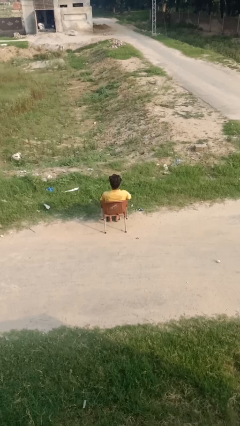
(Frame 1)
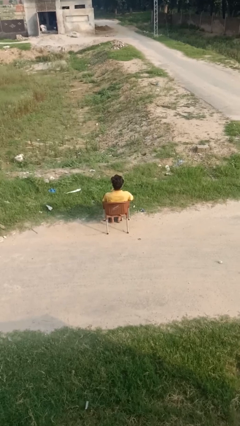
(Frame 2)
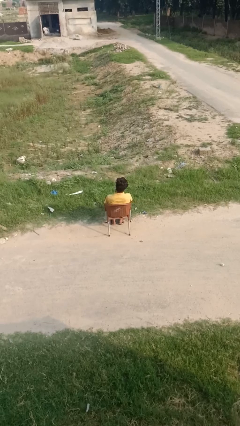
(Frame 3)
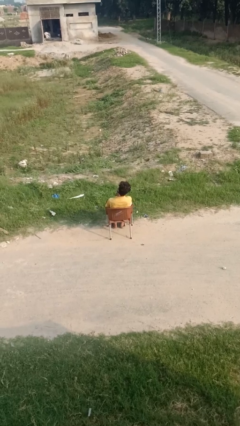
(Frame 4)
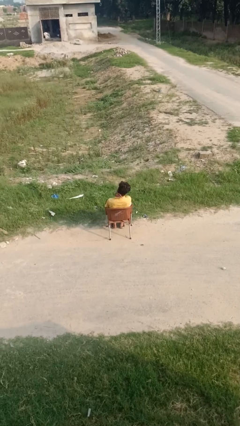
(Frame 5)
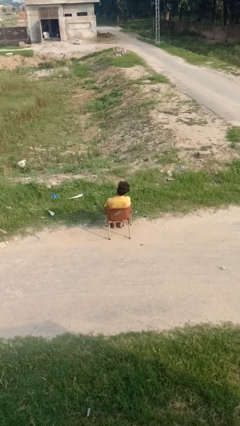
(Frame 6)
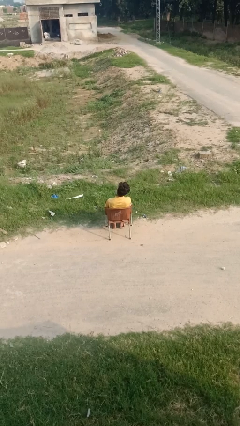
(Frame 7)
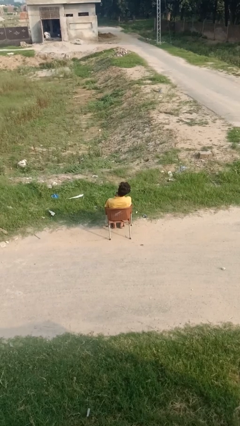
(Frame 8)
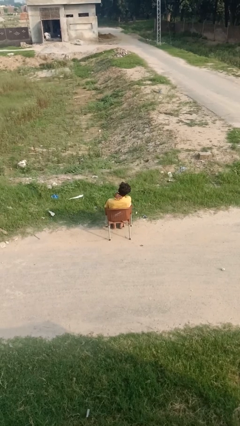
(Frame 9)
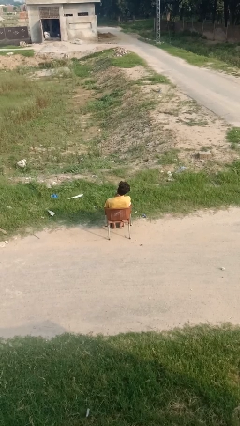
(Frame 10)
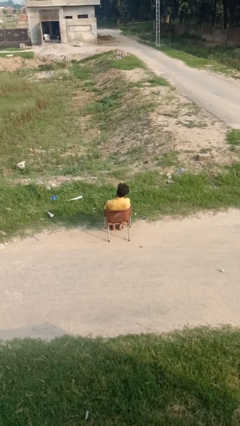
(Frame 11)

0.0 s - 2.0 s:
person rubs neck

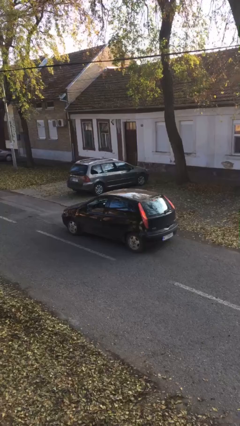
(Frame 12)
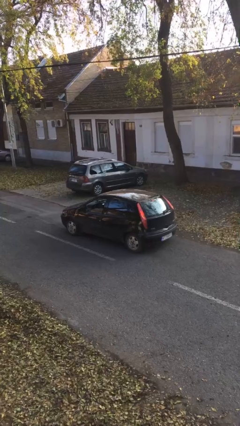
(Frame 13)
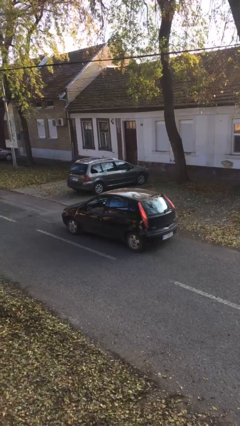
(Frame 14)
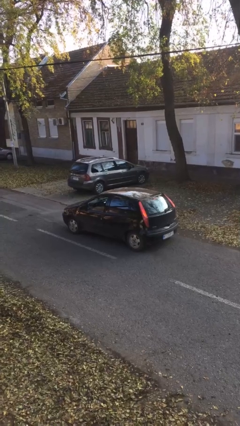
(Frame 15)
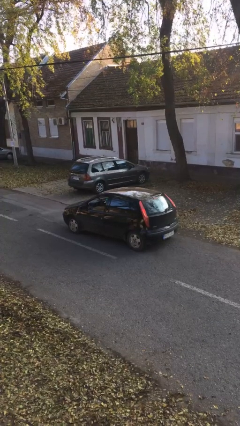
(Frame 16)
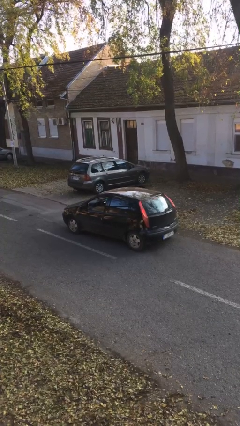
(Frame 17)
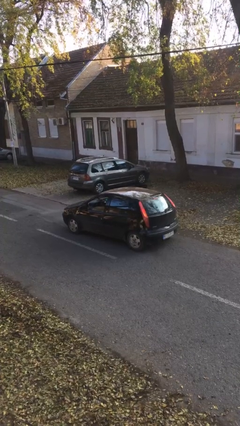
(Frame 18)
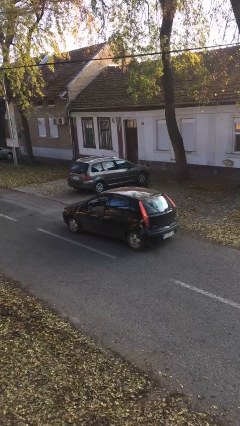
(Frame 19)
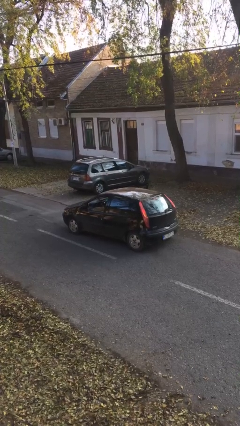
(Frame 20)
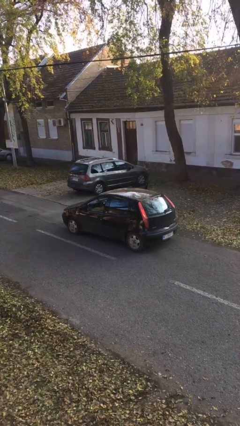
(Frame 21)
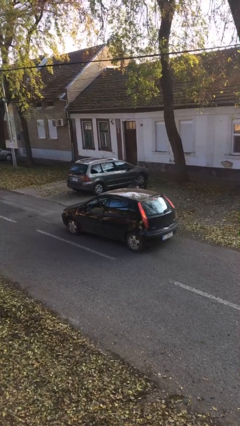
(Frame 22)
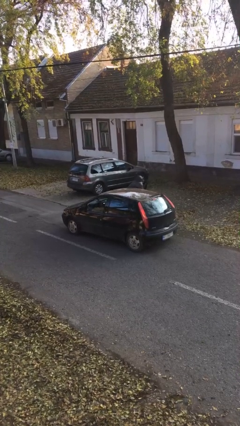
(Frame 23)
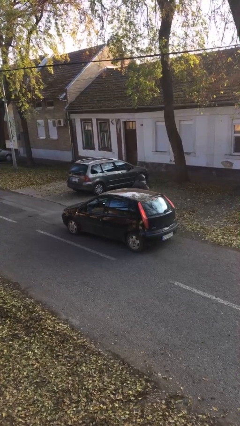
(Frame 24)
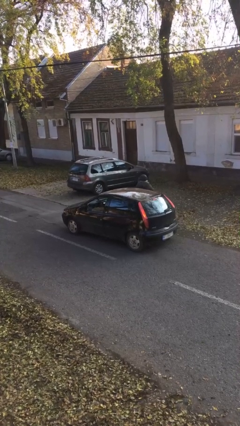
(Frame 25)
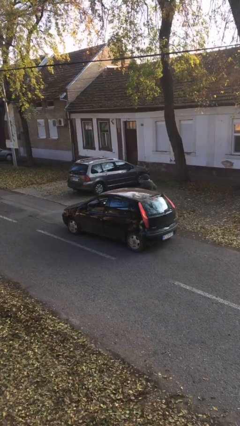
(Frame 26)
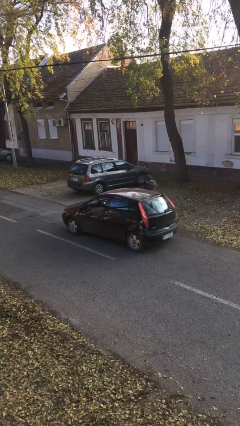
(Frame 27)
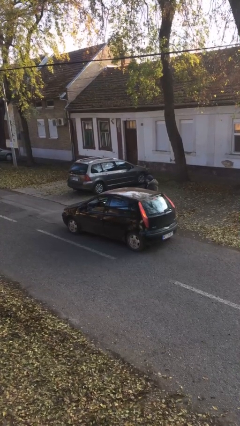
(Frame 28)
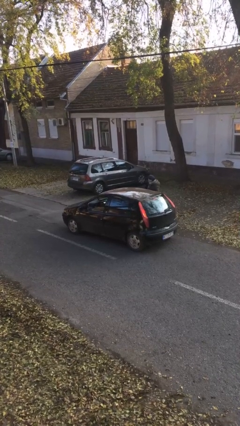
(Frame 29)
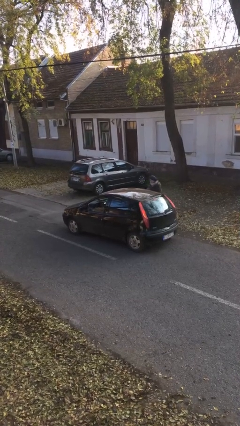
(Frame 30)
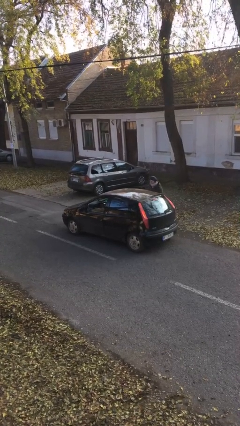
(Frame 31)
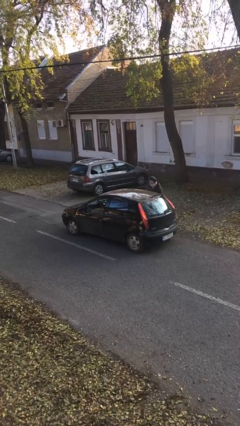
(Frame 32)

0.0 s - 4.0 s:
car drops off person

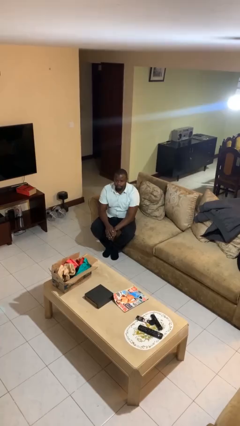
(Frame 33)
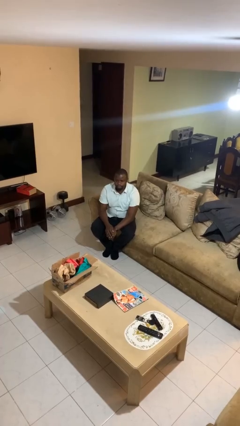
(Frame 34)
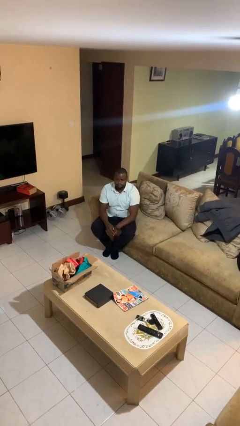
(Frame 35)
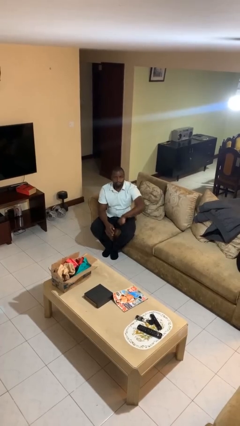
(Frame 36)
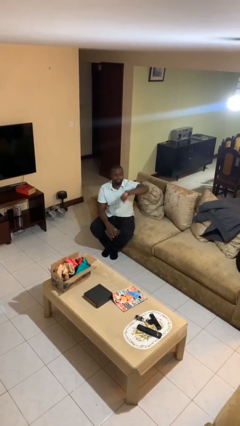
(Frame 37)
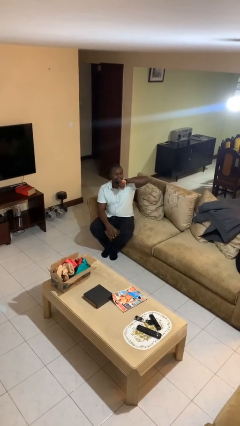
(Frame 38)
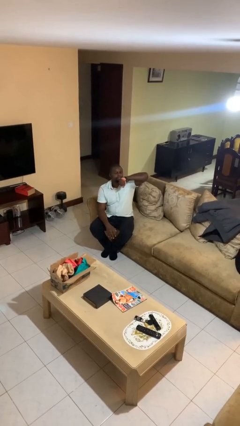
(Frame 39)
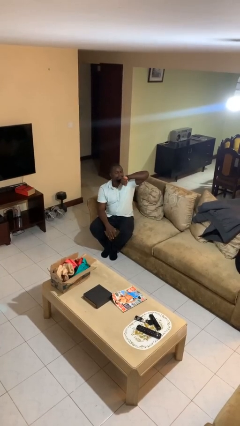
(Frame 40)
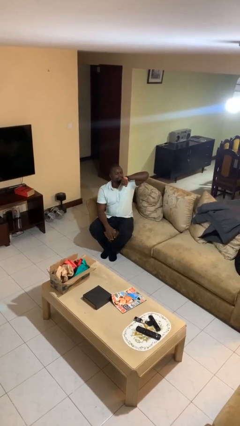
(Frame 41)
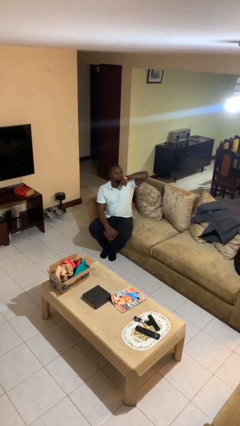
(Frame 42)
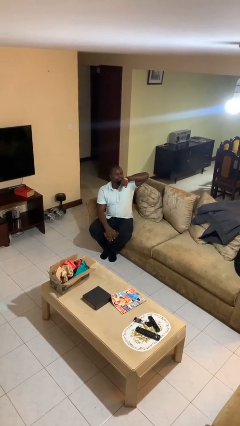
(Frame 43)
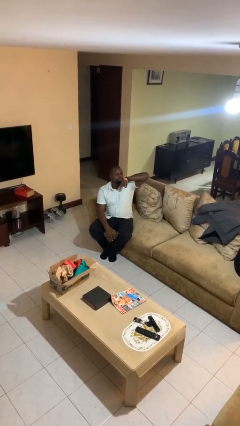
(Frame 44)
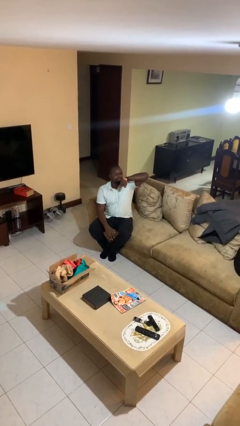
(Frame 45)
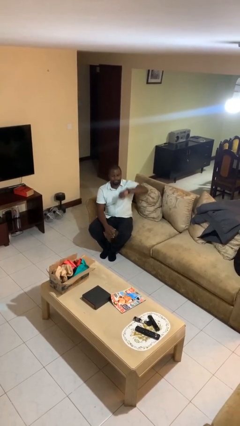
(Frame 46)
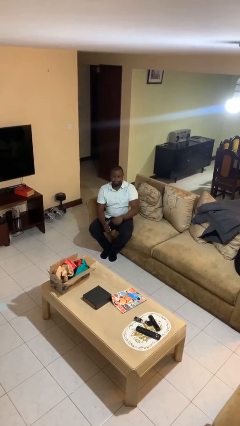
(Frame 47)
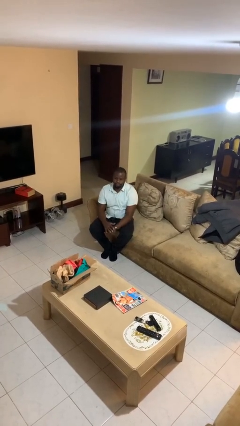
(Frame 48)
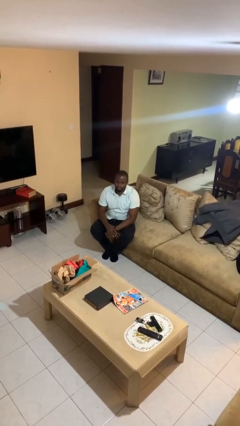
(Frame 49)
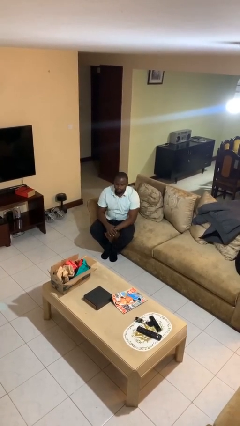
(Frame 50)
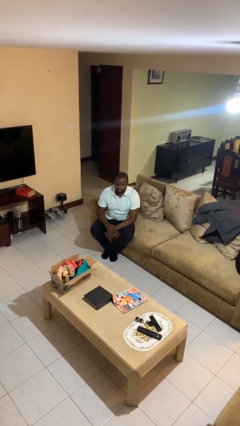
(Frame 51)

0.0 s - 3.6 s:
person looks at wristwatch

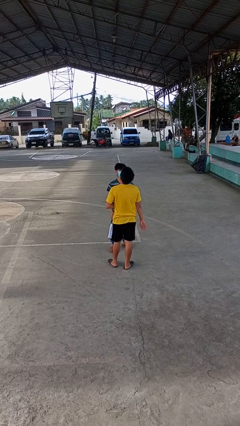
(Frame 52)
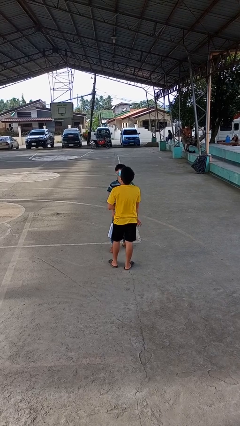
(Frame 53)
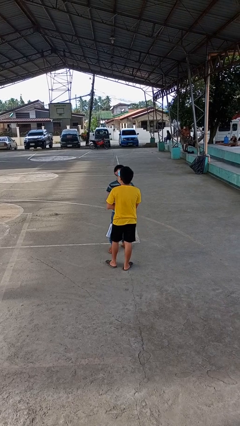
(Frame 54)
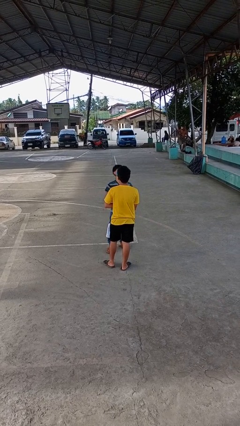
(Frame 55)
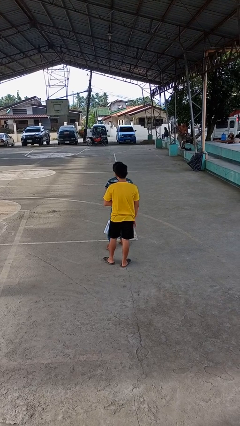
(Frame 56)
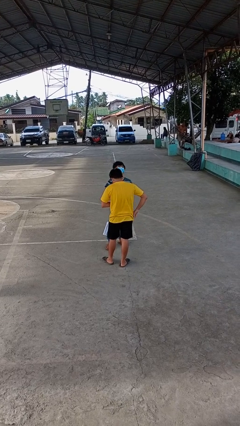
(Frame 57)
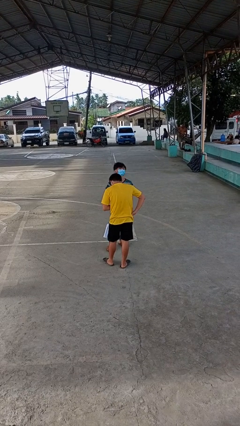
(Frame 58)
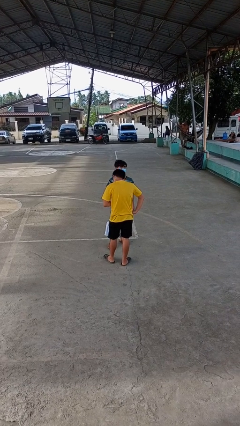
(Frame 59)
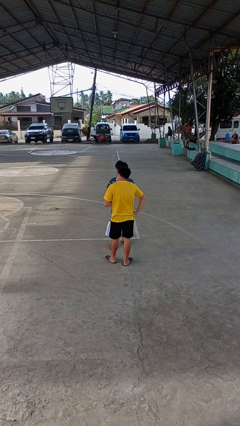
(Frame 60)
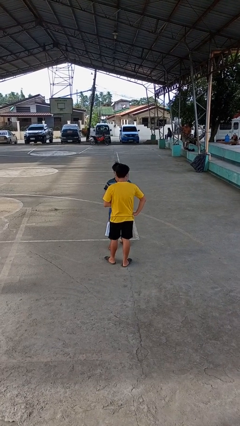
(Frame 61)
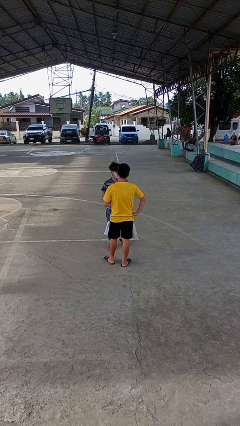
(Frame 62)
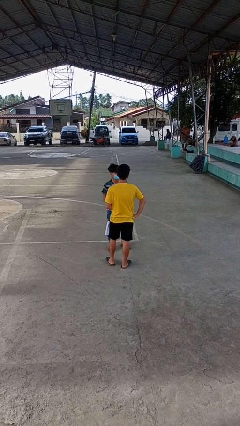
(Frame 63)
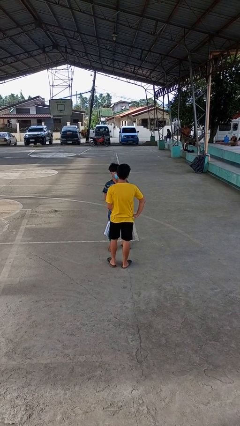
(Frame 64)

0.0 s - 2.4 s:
person laughs with person

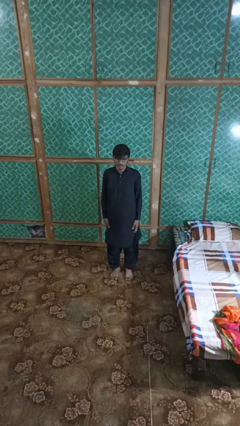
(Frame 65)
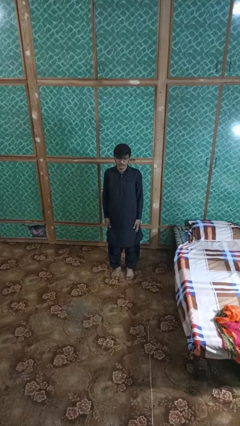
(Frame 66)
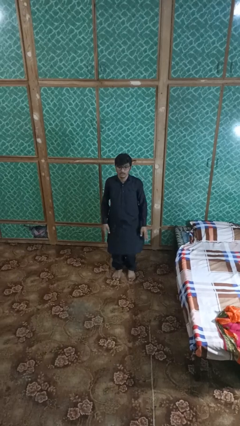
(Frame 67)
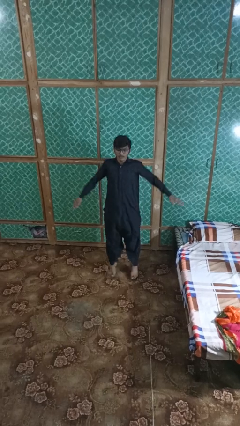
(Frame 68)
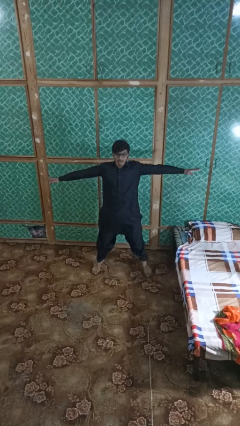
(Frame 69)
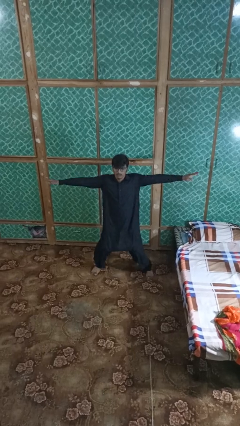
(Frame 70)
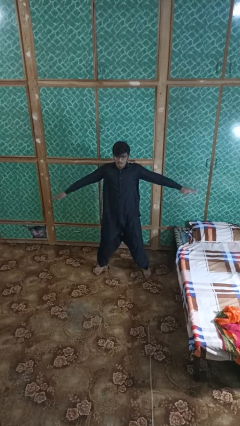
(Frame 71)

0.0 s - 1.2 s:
person exercises with jumping jacks

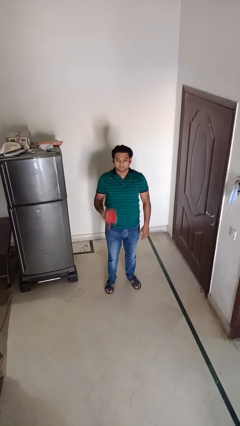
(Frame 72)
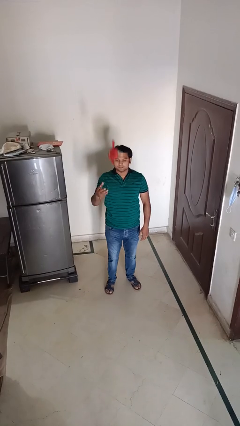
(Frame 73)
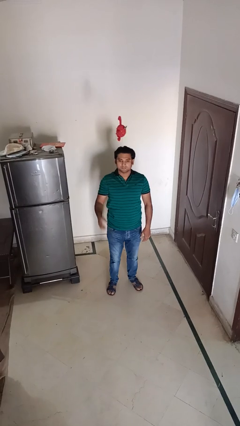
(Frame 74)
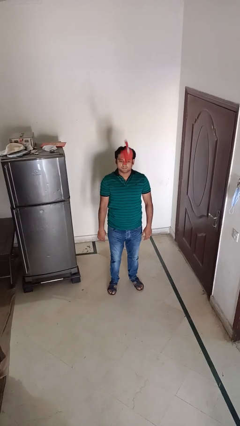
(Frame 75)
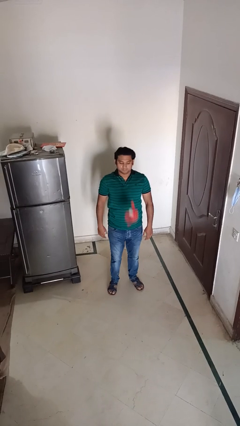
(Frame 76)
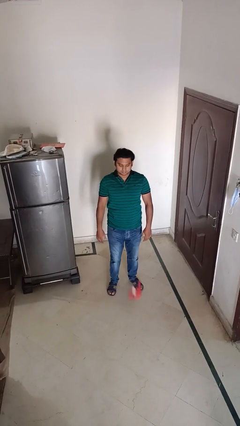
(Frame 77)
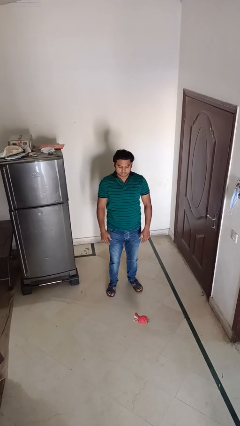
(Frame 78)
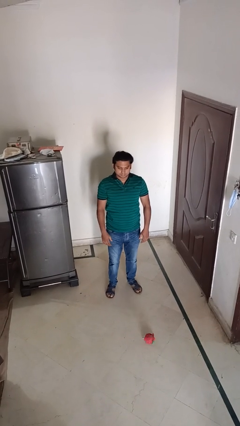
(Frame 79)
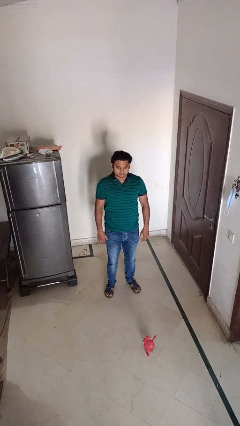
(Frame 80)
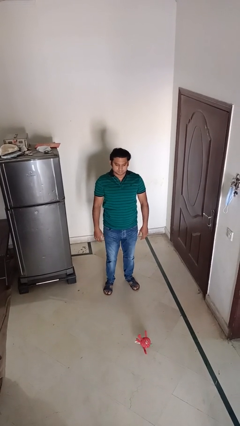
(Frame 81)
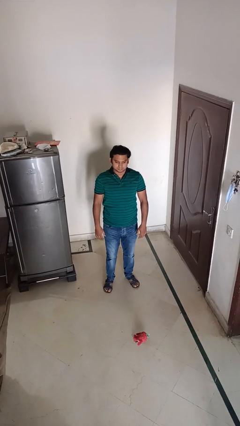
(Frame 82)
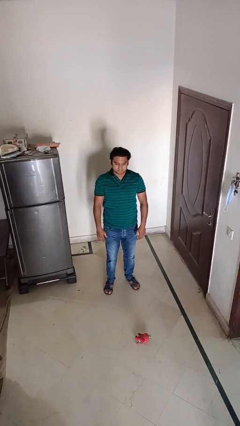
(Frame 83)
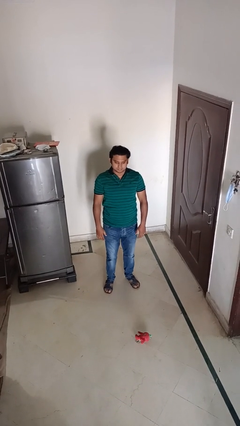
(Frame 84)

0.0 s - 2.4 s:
person throws object into air

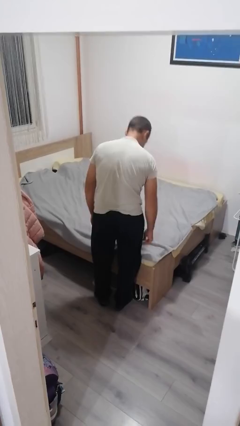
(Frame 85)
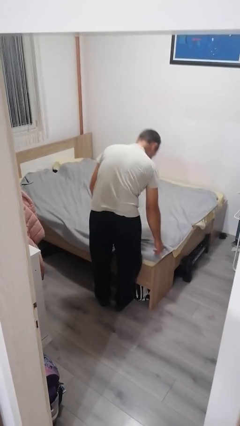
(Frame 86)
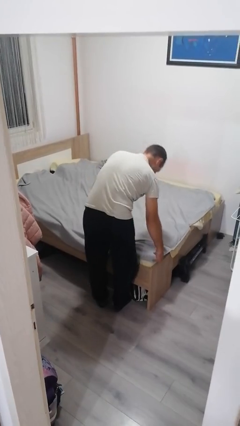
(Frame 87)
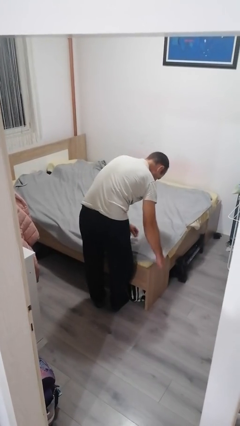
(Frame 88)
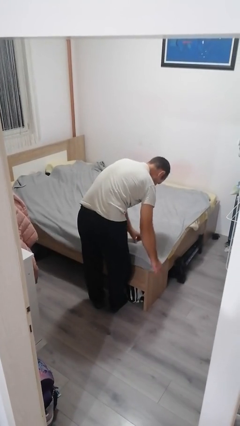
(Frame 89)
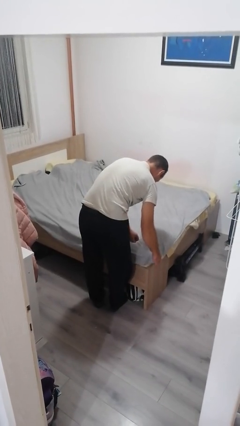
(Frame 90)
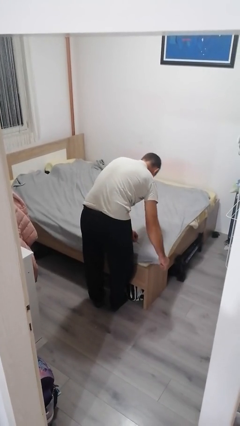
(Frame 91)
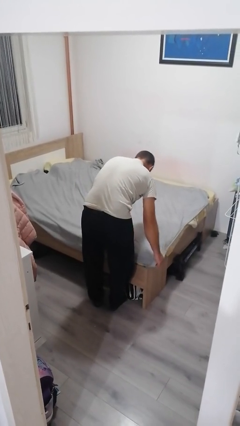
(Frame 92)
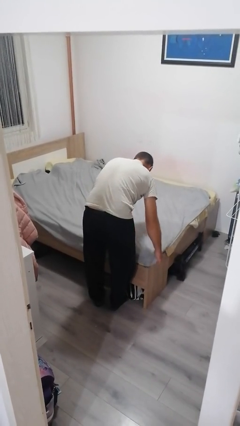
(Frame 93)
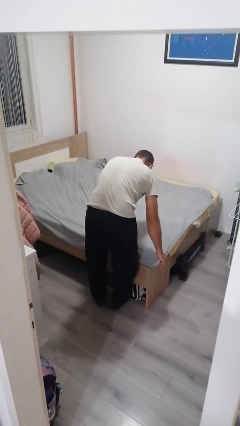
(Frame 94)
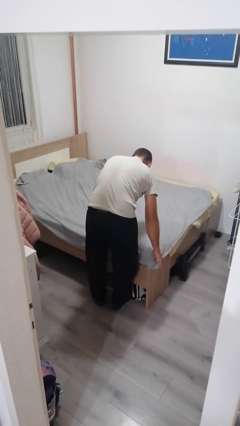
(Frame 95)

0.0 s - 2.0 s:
person makes bed
